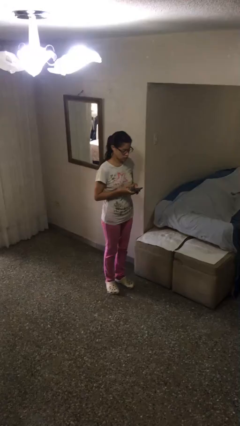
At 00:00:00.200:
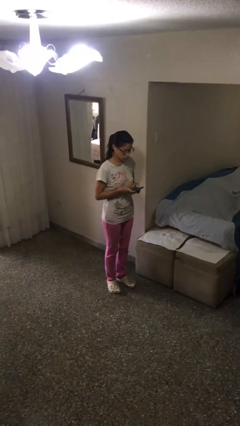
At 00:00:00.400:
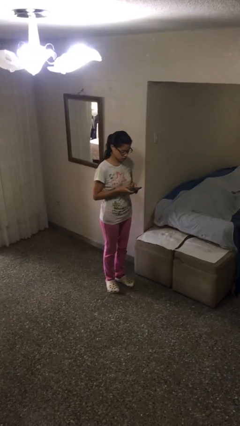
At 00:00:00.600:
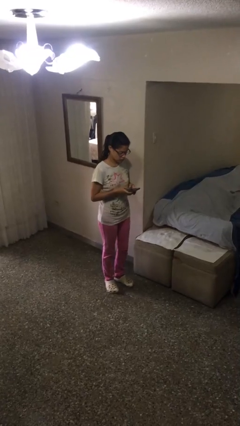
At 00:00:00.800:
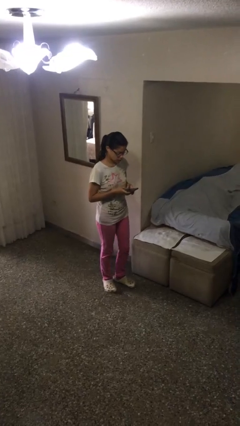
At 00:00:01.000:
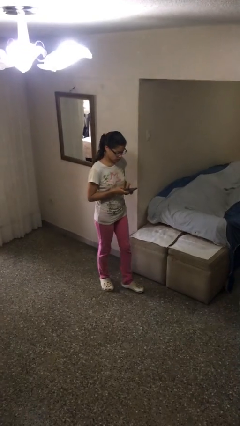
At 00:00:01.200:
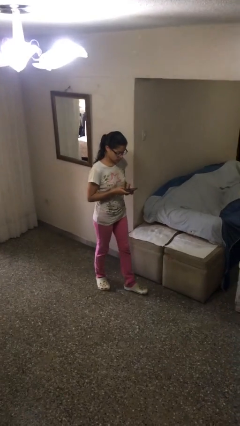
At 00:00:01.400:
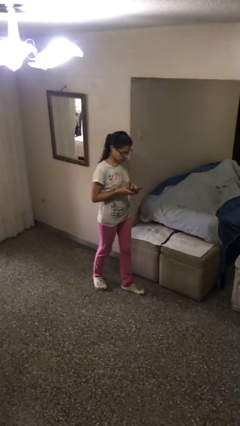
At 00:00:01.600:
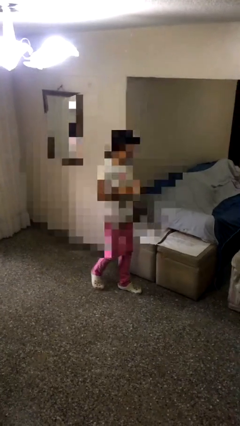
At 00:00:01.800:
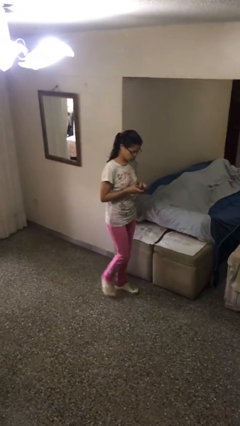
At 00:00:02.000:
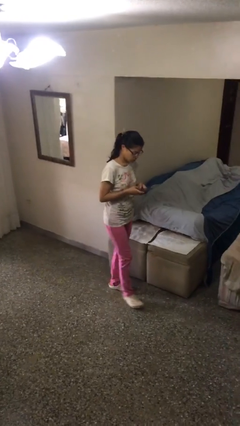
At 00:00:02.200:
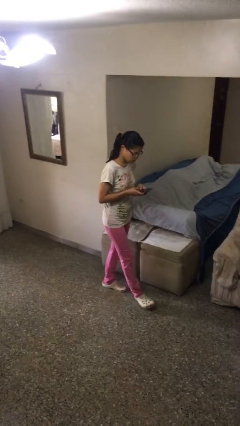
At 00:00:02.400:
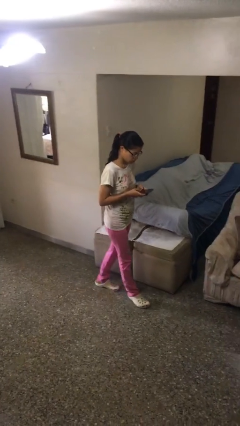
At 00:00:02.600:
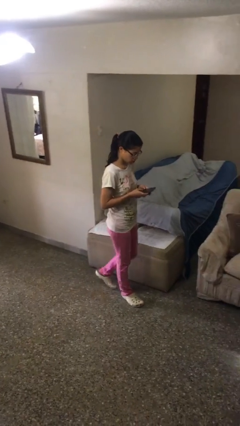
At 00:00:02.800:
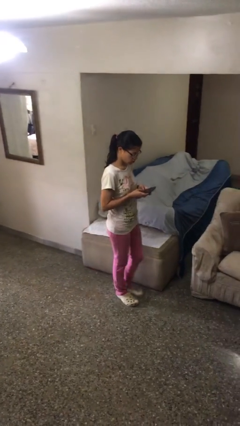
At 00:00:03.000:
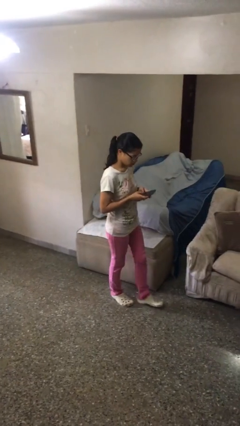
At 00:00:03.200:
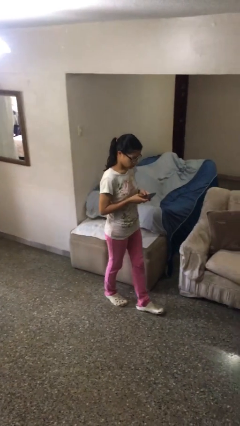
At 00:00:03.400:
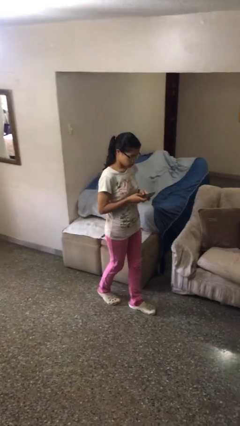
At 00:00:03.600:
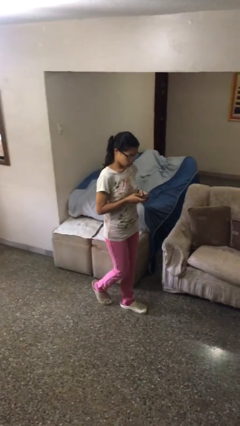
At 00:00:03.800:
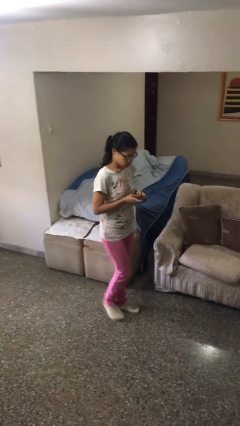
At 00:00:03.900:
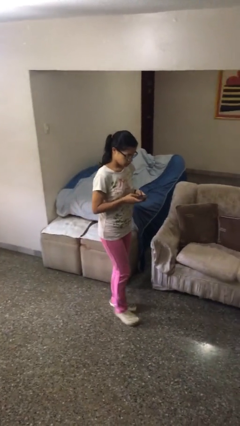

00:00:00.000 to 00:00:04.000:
person texts on phone

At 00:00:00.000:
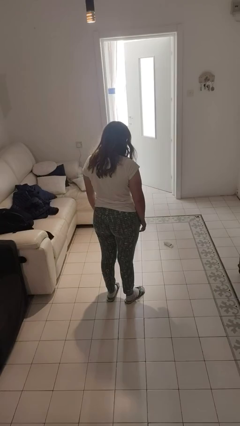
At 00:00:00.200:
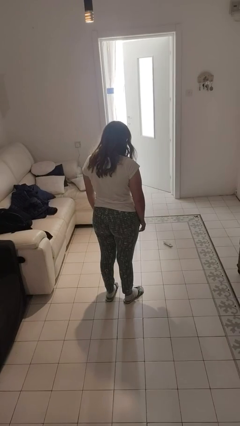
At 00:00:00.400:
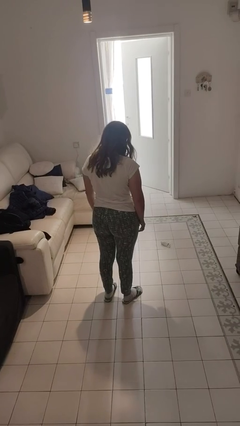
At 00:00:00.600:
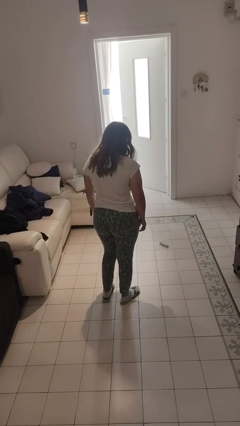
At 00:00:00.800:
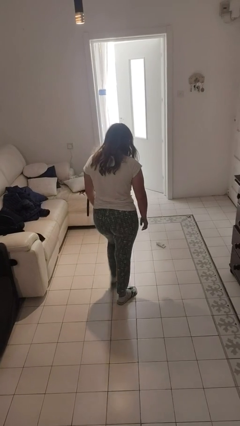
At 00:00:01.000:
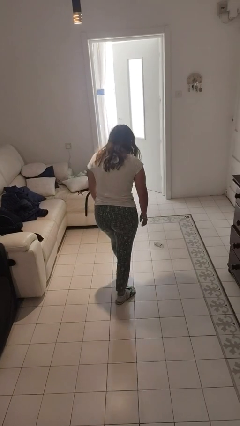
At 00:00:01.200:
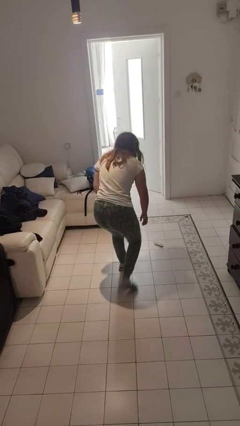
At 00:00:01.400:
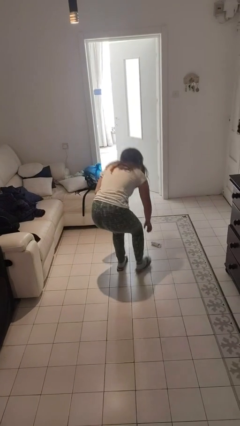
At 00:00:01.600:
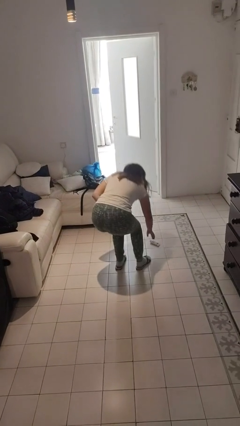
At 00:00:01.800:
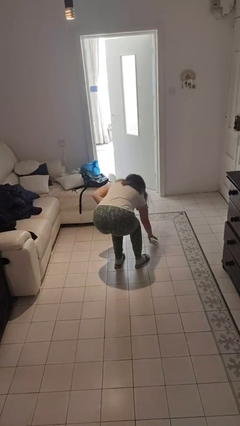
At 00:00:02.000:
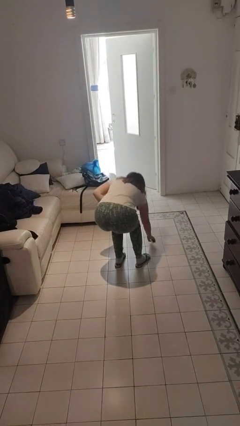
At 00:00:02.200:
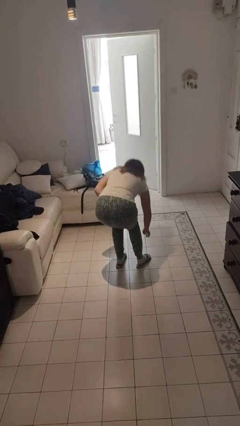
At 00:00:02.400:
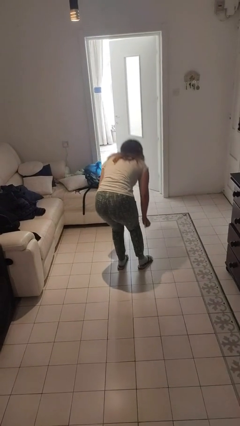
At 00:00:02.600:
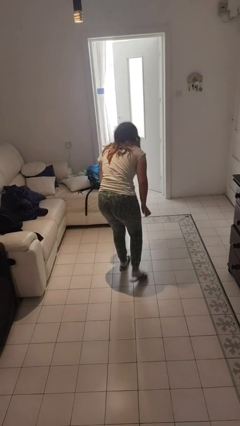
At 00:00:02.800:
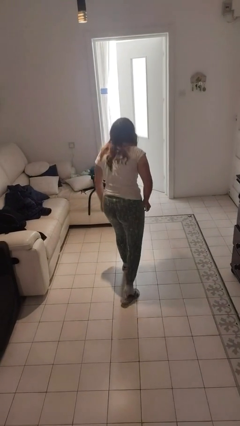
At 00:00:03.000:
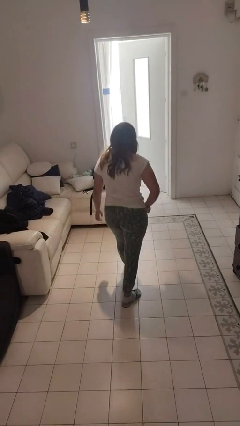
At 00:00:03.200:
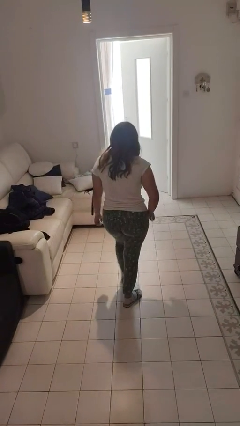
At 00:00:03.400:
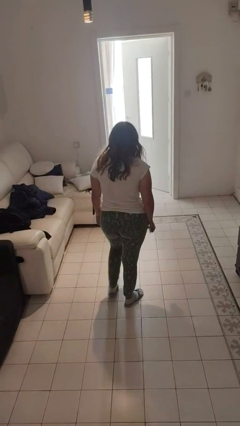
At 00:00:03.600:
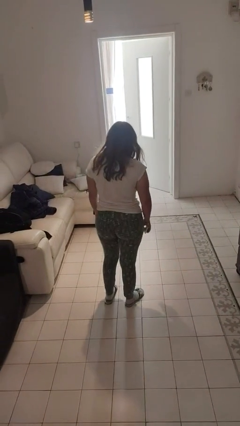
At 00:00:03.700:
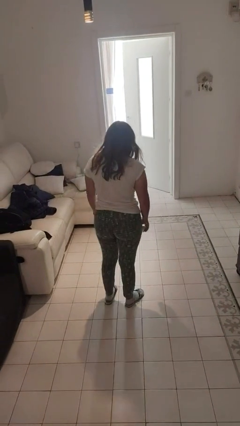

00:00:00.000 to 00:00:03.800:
person picks up object from floor

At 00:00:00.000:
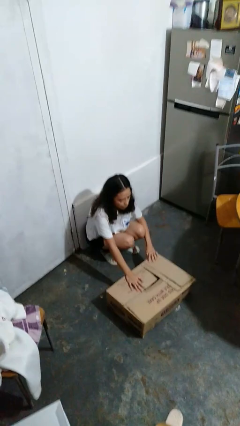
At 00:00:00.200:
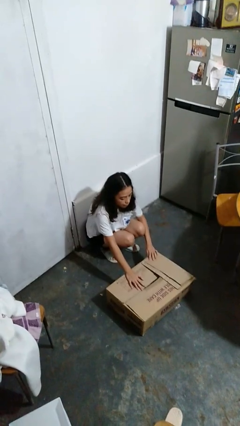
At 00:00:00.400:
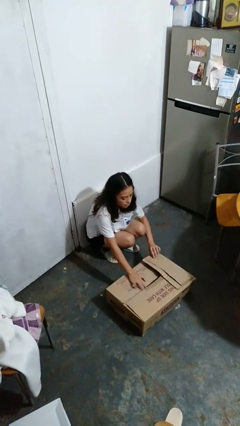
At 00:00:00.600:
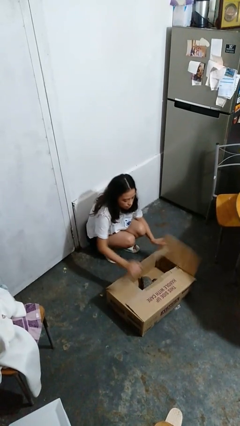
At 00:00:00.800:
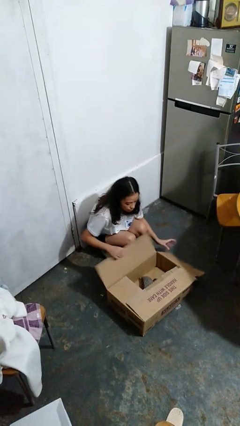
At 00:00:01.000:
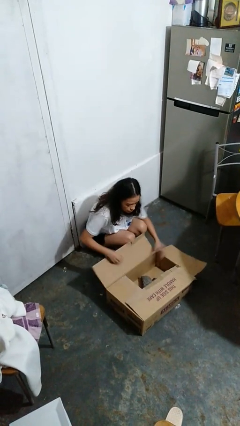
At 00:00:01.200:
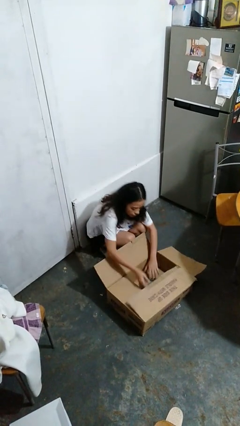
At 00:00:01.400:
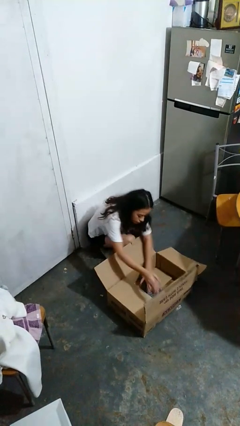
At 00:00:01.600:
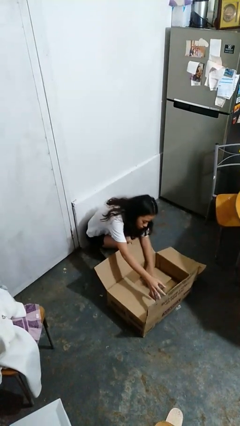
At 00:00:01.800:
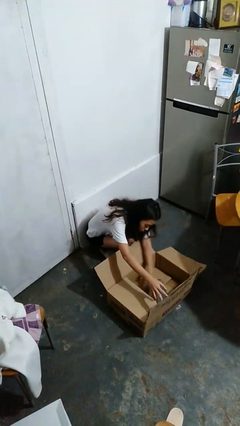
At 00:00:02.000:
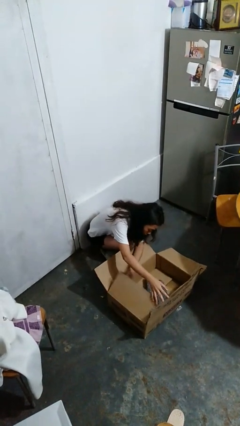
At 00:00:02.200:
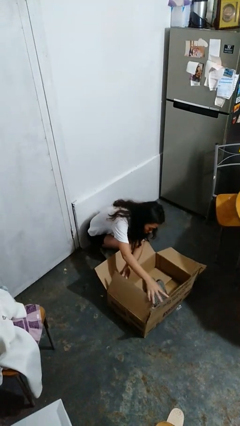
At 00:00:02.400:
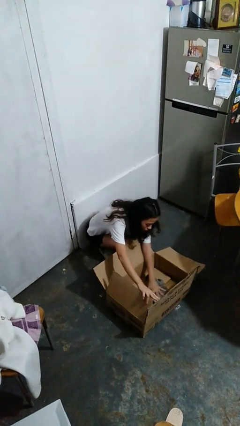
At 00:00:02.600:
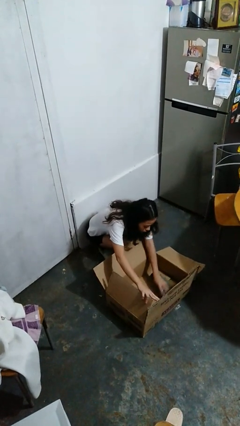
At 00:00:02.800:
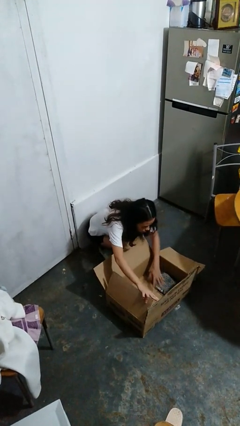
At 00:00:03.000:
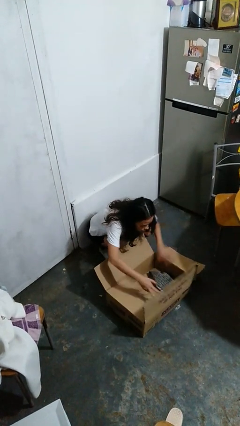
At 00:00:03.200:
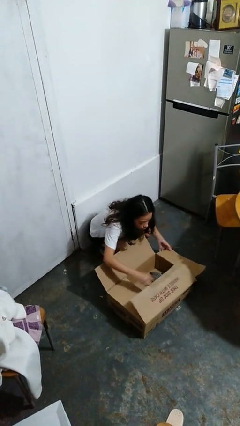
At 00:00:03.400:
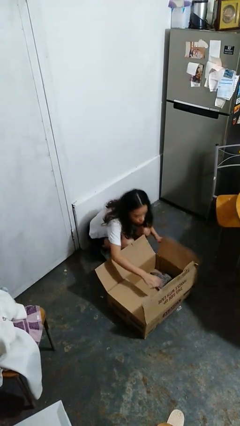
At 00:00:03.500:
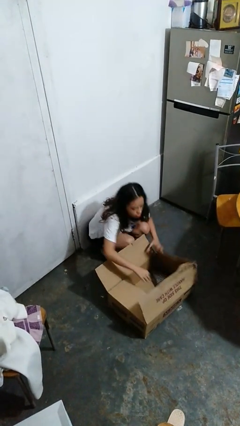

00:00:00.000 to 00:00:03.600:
person searches in box

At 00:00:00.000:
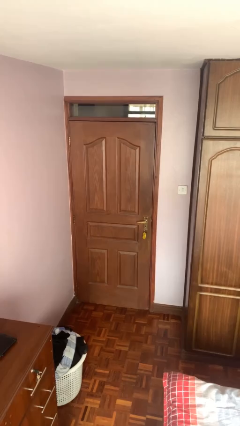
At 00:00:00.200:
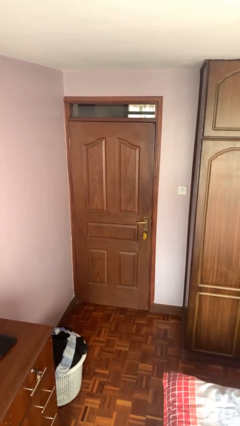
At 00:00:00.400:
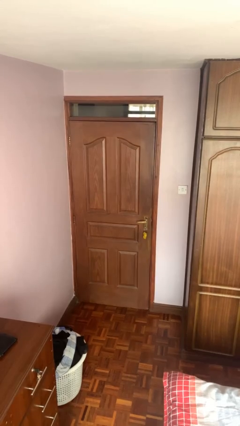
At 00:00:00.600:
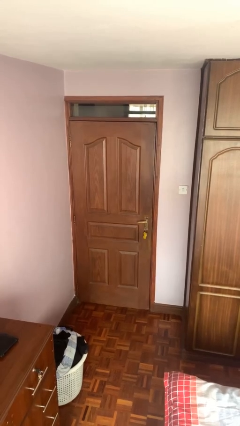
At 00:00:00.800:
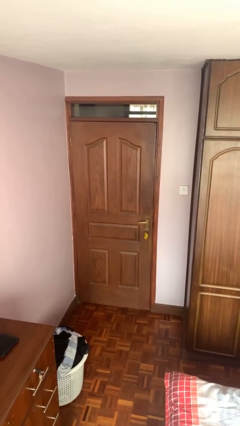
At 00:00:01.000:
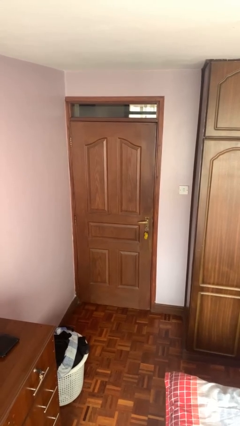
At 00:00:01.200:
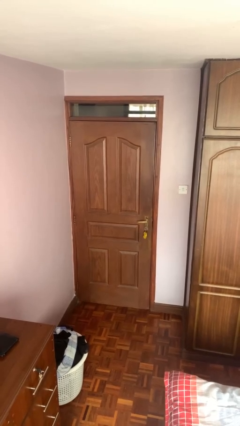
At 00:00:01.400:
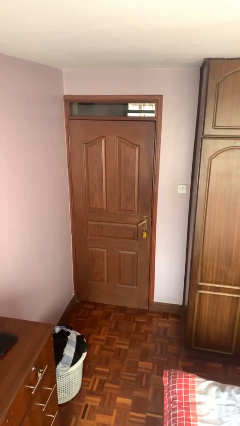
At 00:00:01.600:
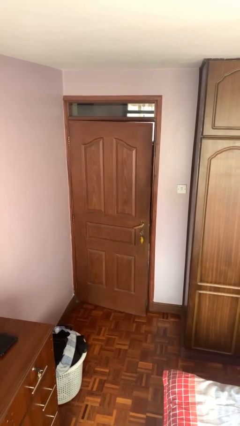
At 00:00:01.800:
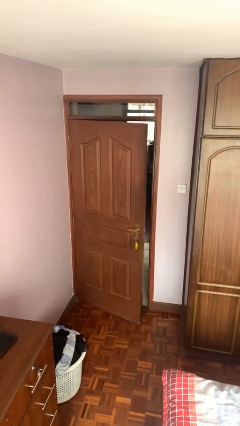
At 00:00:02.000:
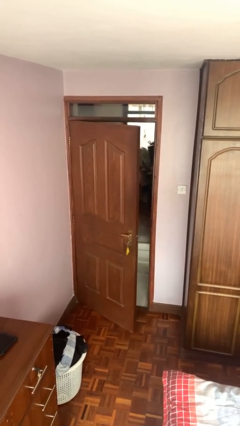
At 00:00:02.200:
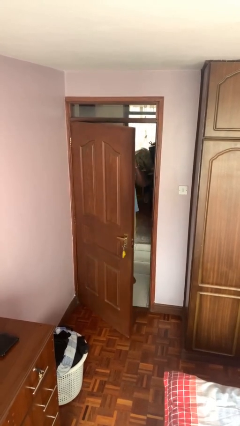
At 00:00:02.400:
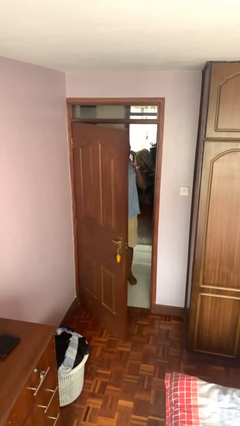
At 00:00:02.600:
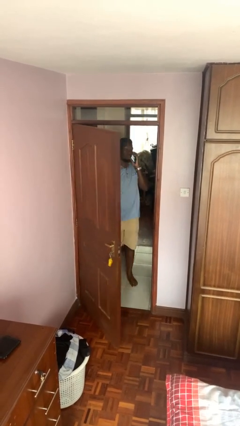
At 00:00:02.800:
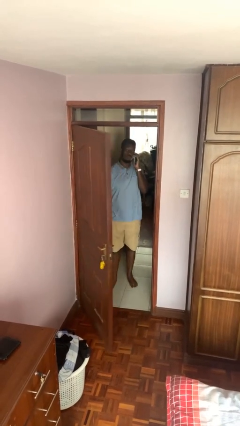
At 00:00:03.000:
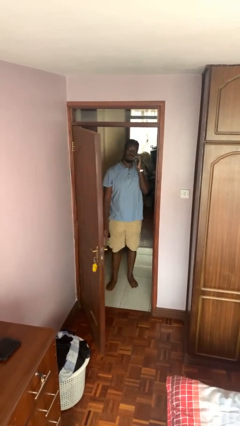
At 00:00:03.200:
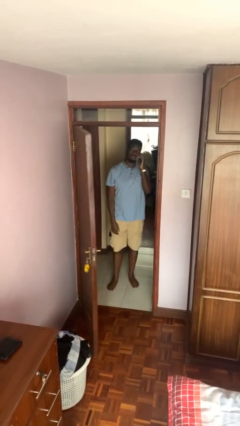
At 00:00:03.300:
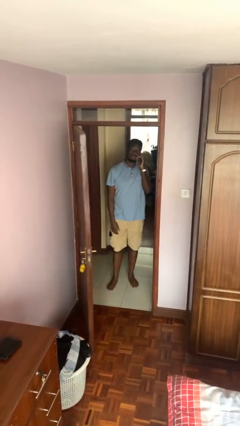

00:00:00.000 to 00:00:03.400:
person opens facility door

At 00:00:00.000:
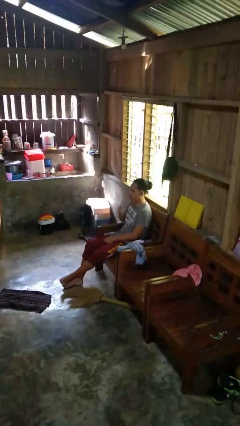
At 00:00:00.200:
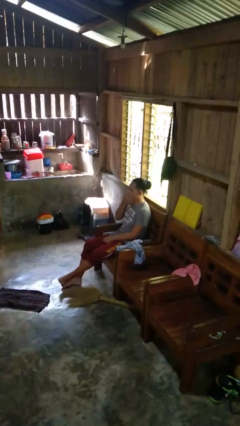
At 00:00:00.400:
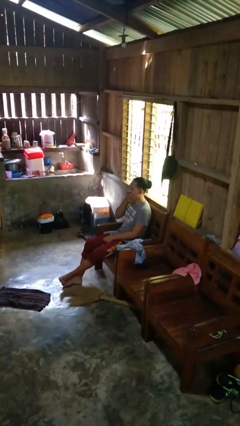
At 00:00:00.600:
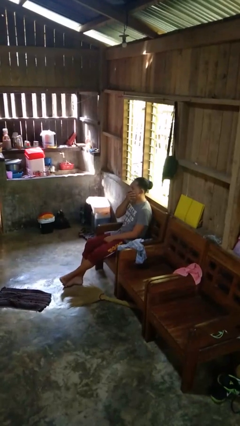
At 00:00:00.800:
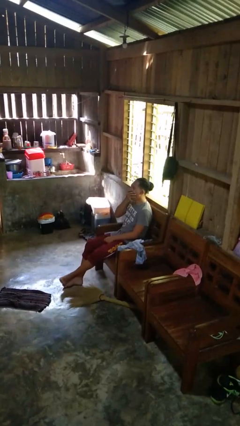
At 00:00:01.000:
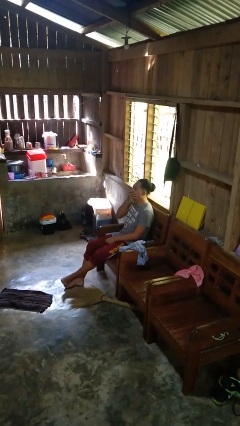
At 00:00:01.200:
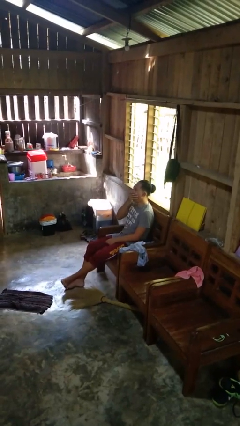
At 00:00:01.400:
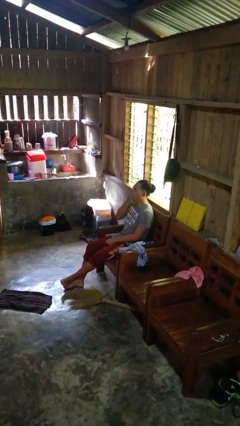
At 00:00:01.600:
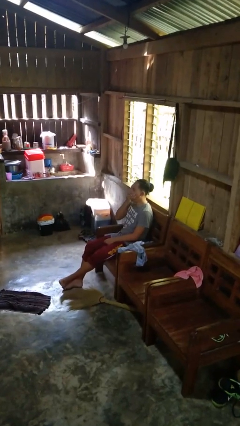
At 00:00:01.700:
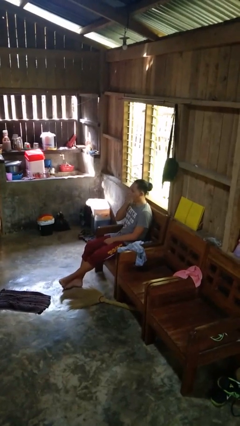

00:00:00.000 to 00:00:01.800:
person yawns

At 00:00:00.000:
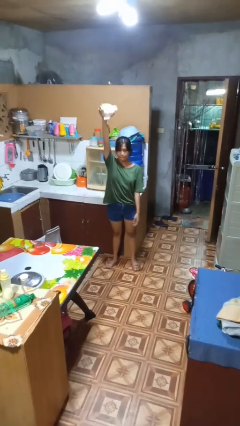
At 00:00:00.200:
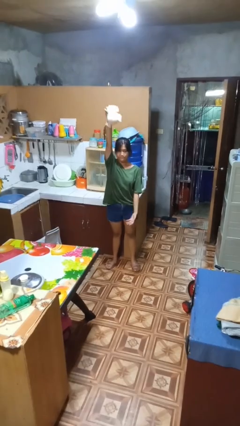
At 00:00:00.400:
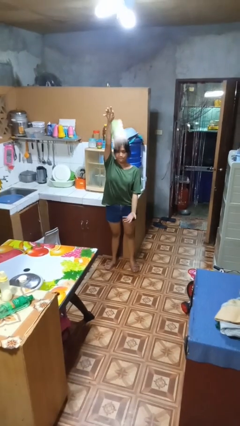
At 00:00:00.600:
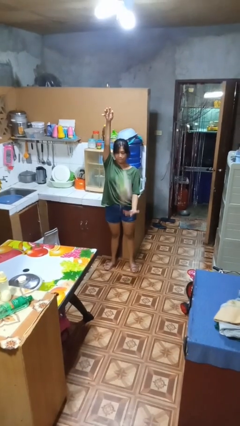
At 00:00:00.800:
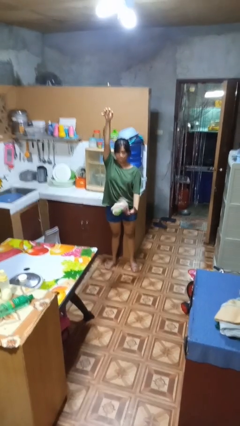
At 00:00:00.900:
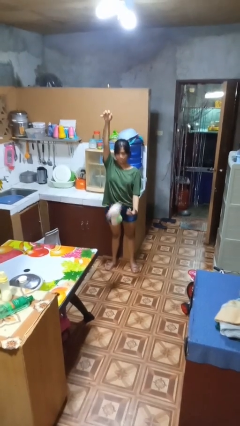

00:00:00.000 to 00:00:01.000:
person drops object
